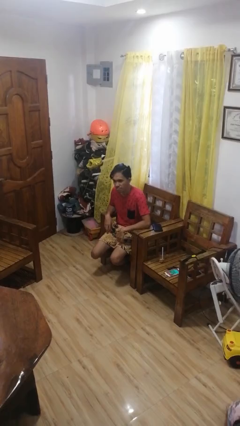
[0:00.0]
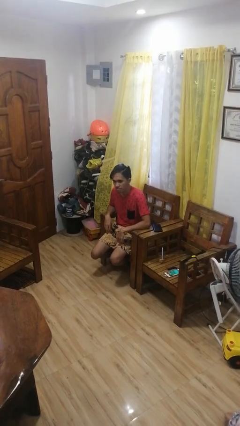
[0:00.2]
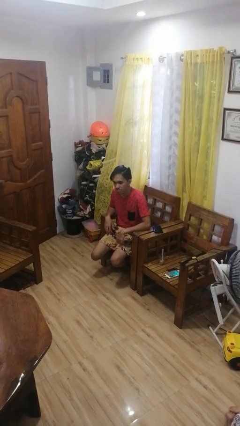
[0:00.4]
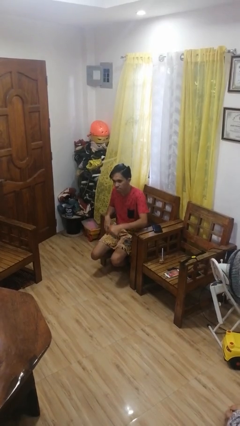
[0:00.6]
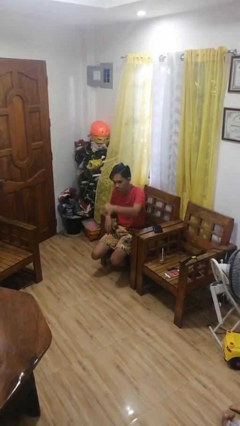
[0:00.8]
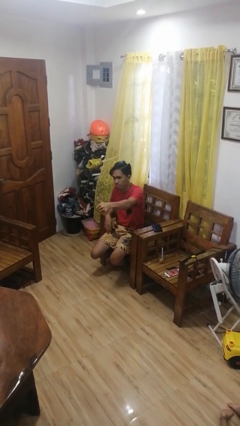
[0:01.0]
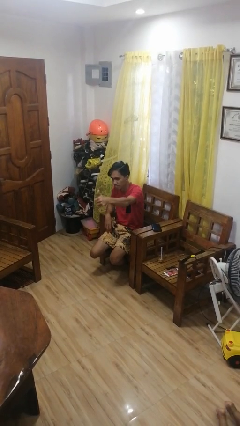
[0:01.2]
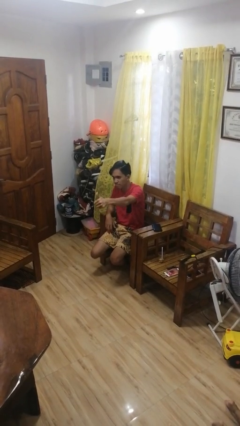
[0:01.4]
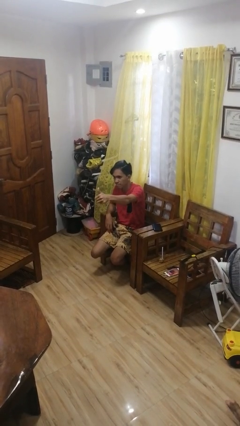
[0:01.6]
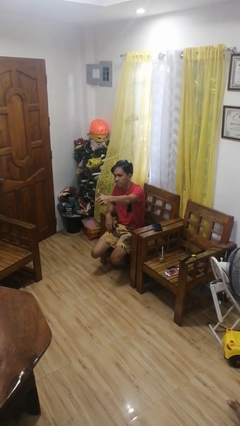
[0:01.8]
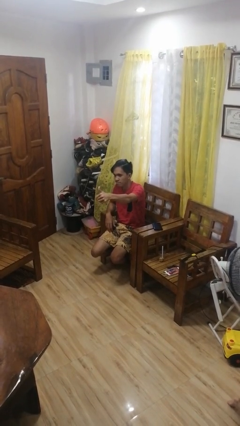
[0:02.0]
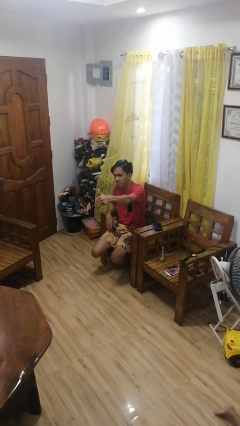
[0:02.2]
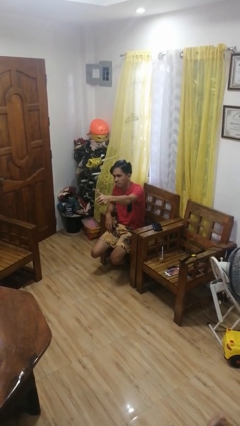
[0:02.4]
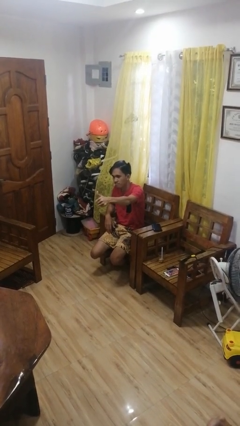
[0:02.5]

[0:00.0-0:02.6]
person gestures thumbs up

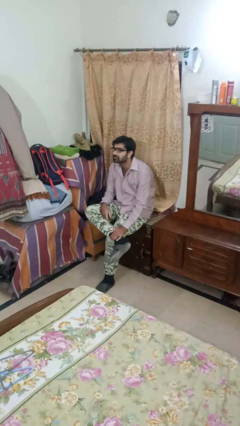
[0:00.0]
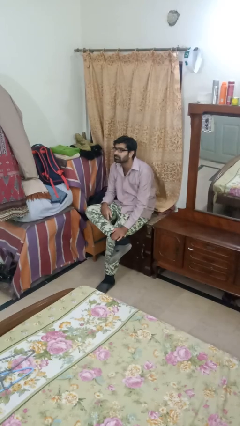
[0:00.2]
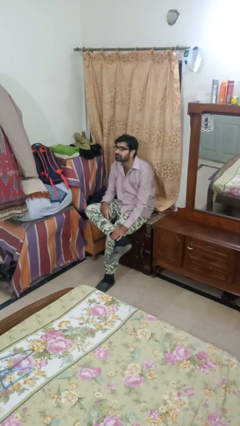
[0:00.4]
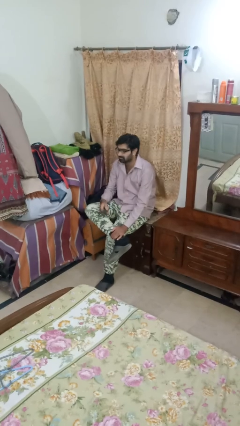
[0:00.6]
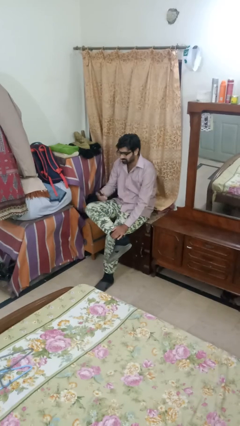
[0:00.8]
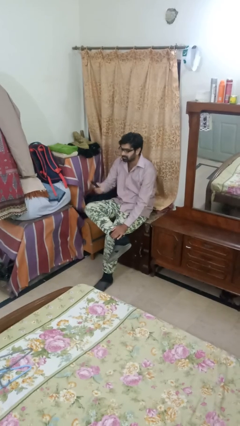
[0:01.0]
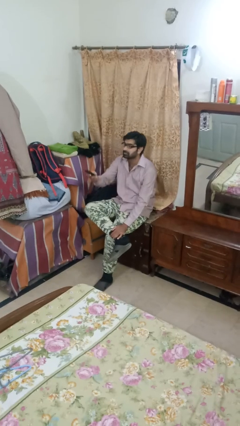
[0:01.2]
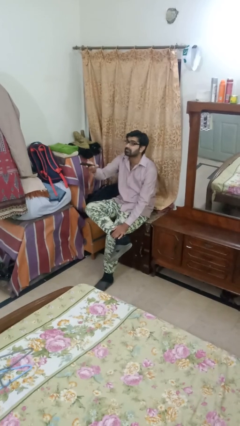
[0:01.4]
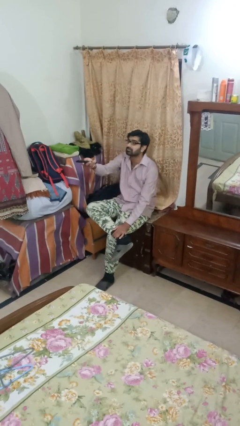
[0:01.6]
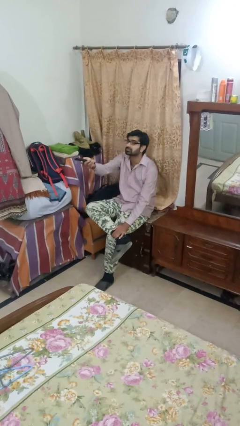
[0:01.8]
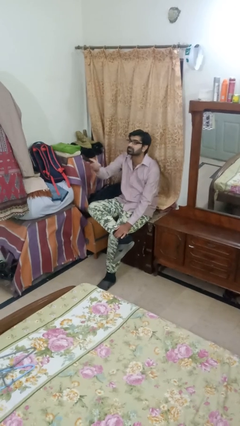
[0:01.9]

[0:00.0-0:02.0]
person uses television remote

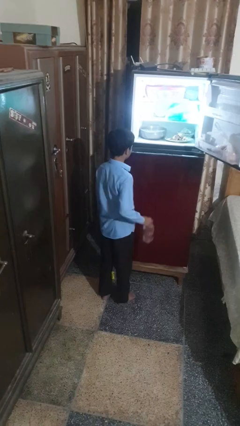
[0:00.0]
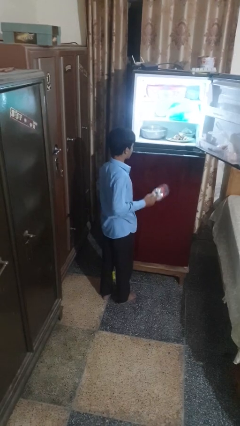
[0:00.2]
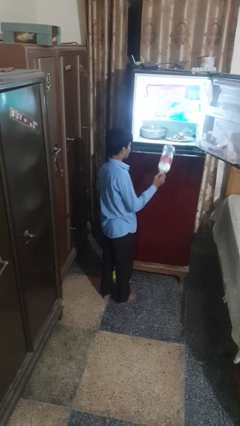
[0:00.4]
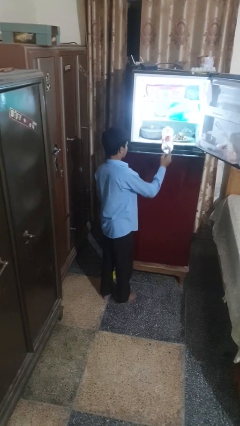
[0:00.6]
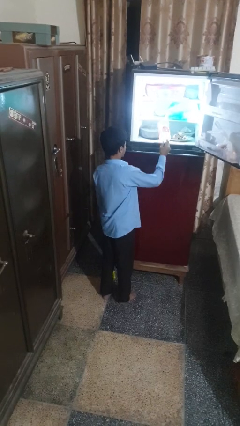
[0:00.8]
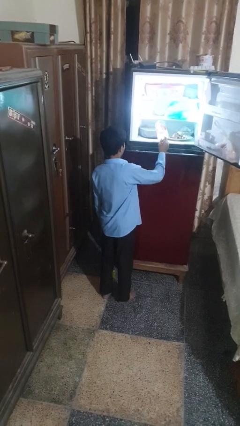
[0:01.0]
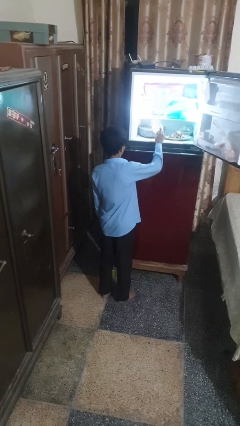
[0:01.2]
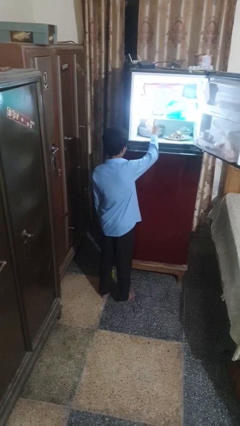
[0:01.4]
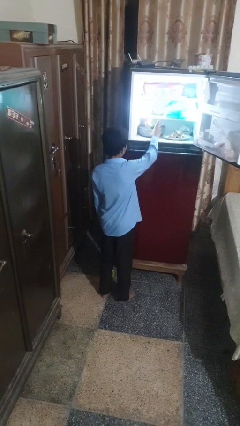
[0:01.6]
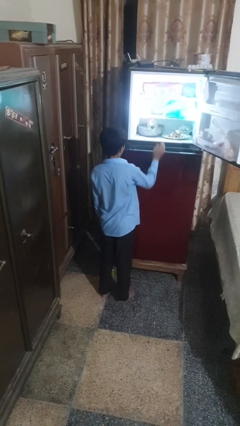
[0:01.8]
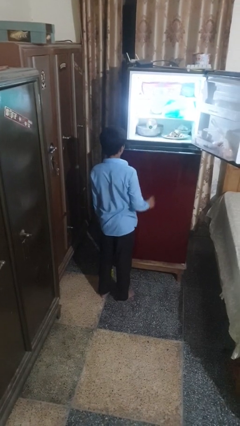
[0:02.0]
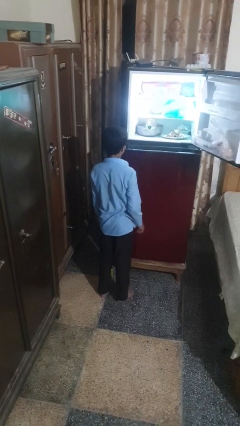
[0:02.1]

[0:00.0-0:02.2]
person puts object into refrigerator

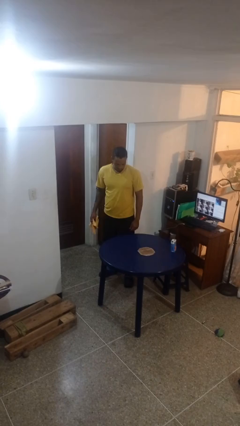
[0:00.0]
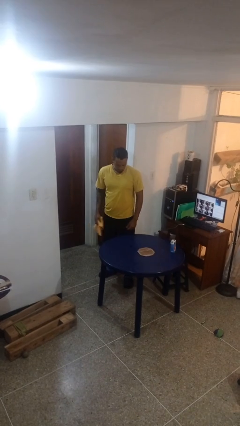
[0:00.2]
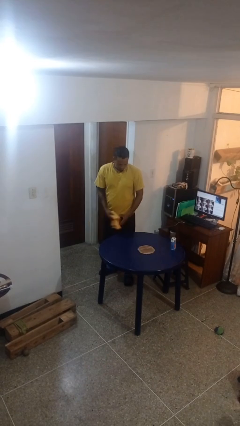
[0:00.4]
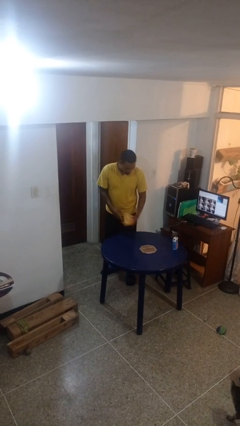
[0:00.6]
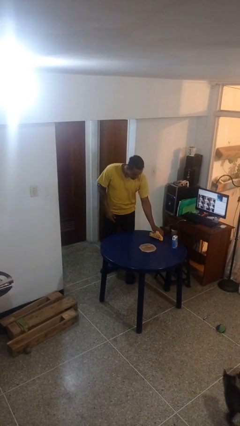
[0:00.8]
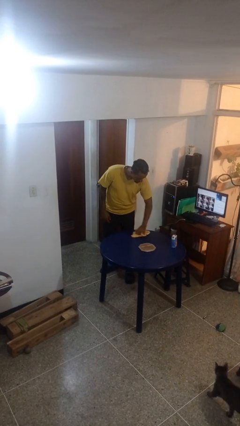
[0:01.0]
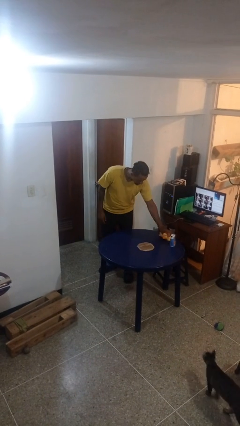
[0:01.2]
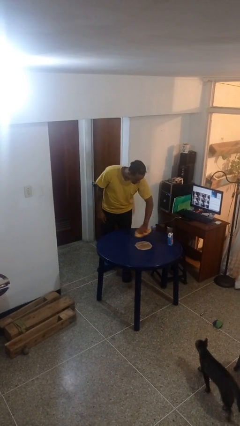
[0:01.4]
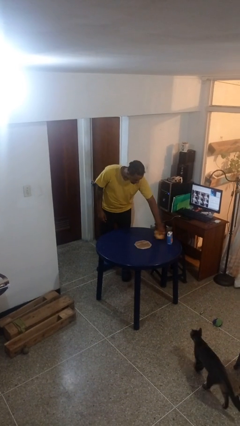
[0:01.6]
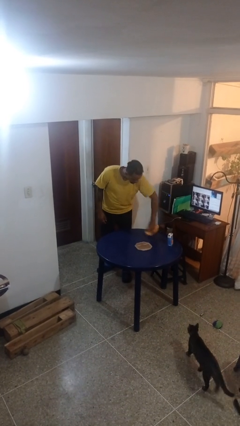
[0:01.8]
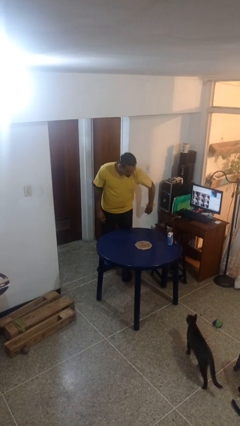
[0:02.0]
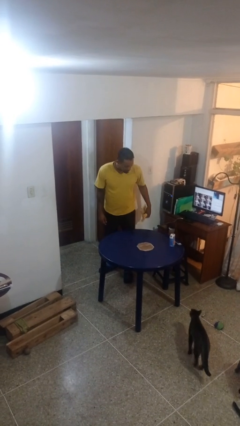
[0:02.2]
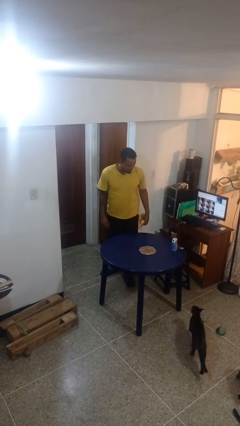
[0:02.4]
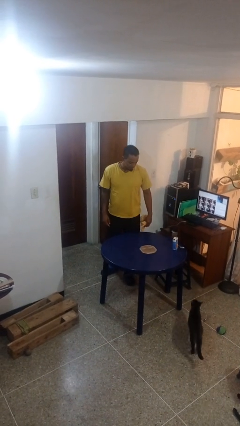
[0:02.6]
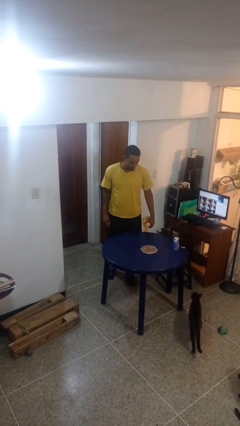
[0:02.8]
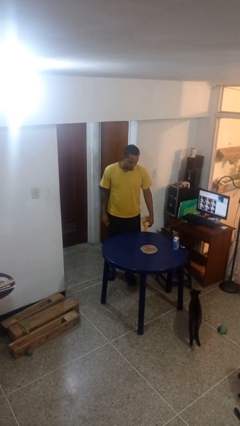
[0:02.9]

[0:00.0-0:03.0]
person cleans table with rag

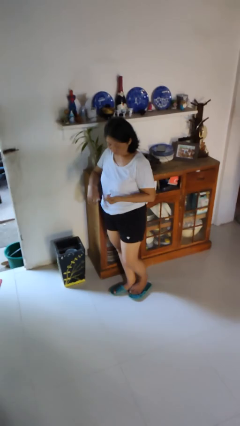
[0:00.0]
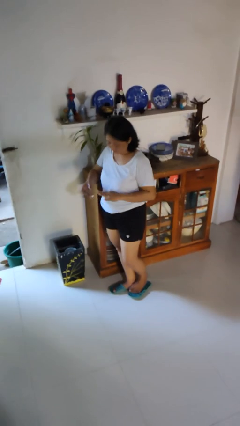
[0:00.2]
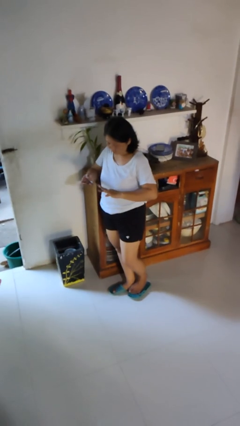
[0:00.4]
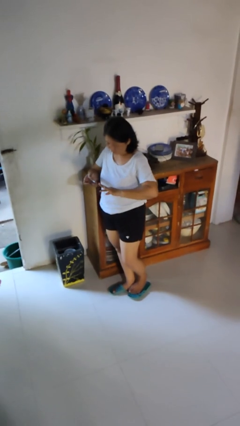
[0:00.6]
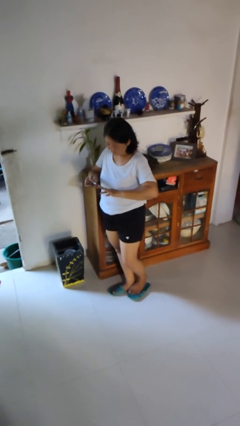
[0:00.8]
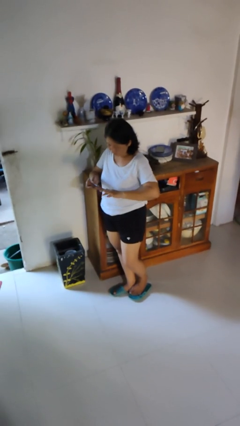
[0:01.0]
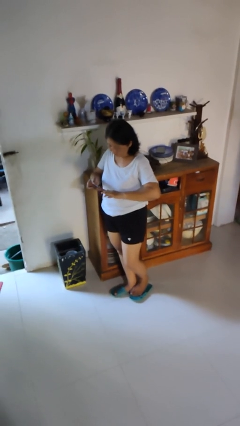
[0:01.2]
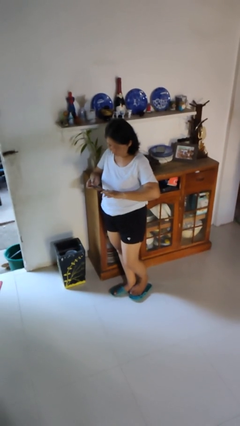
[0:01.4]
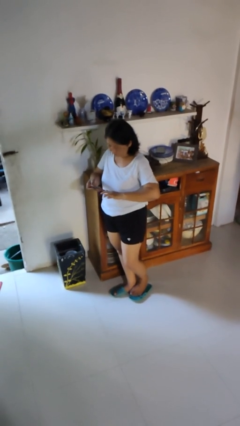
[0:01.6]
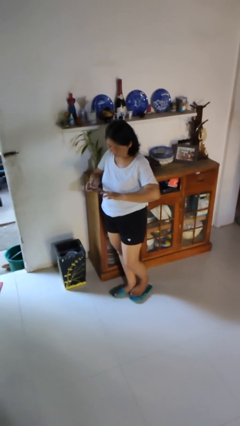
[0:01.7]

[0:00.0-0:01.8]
person clips fingernails

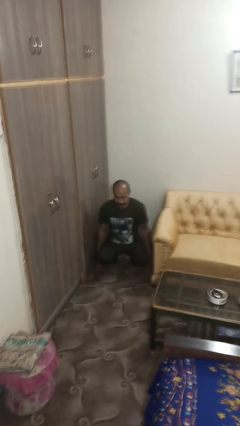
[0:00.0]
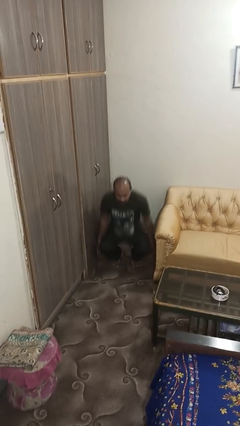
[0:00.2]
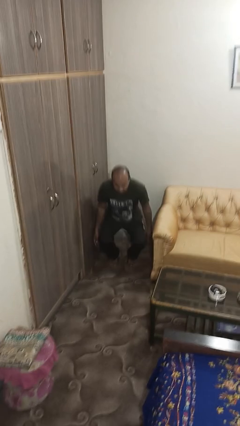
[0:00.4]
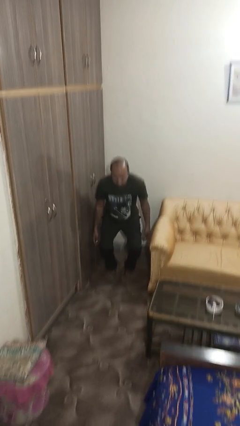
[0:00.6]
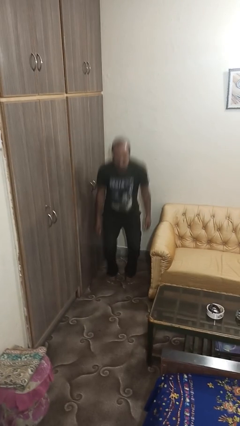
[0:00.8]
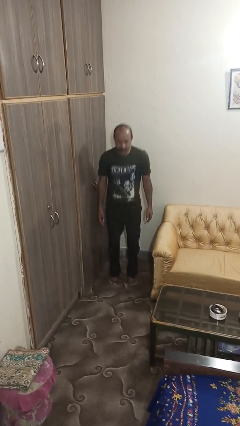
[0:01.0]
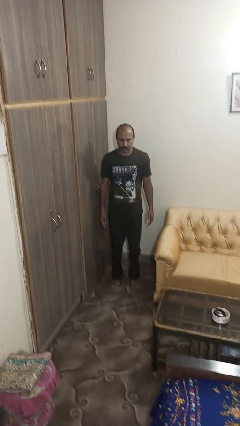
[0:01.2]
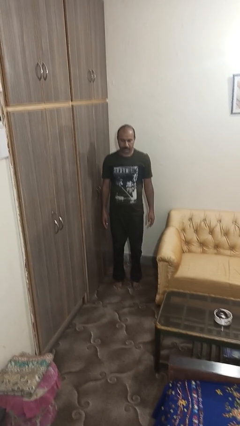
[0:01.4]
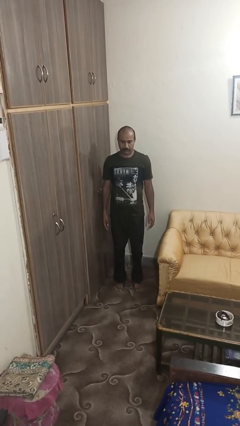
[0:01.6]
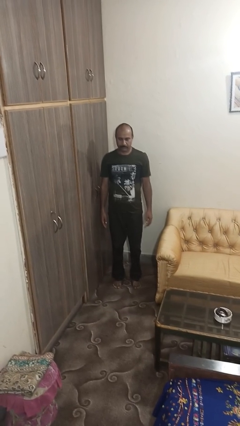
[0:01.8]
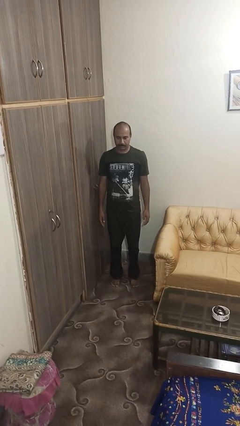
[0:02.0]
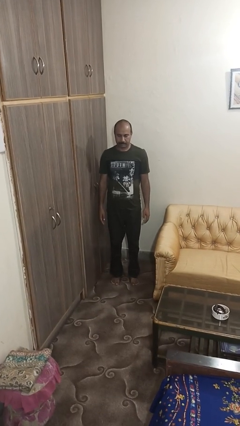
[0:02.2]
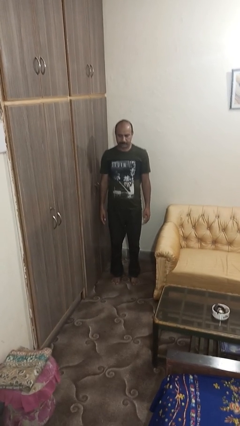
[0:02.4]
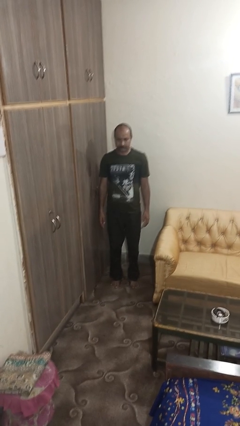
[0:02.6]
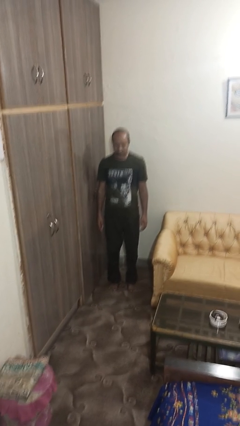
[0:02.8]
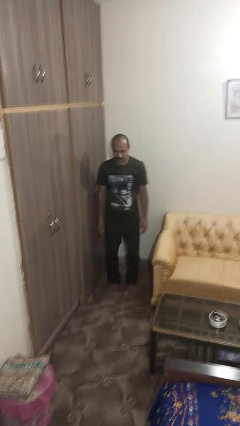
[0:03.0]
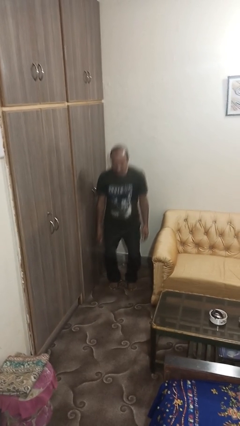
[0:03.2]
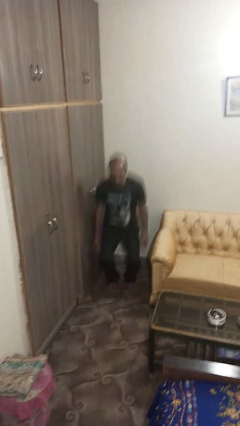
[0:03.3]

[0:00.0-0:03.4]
person stands up

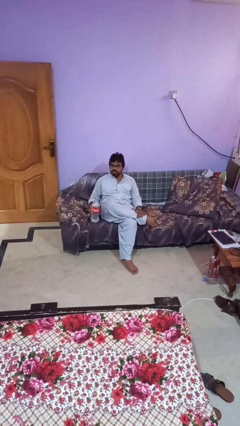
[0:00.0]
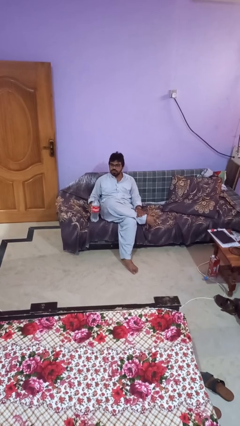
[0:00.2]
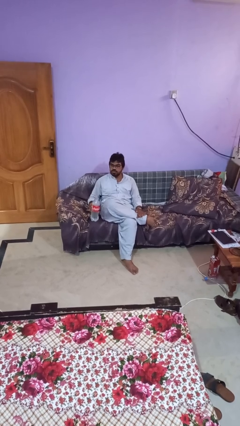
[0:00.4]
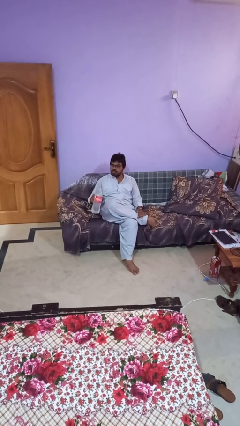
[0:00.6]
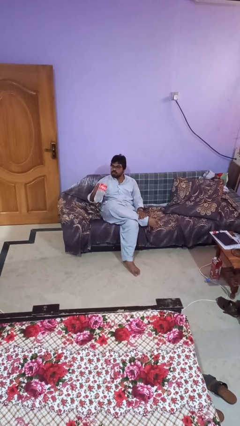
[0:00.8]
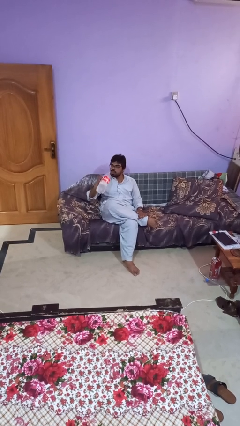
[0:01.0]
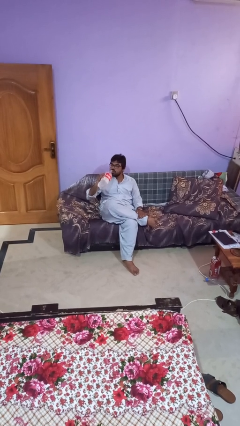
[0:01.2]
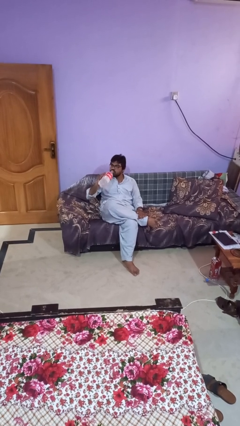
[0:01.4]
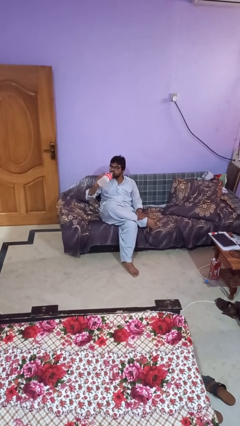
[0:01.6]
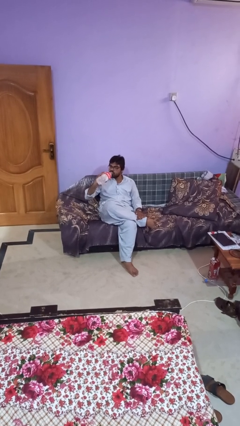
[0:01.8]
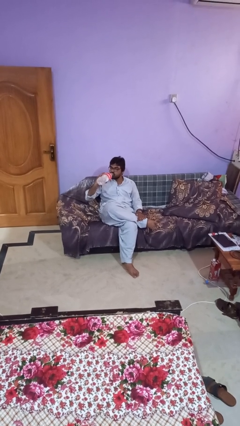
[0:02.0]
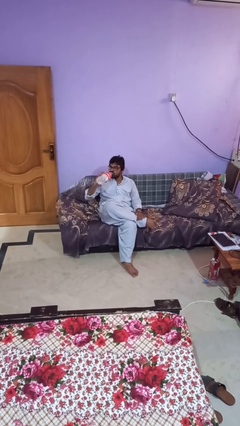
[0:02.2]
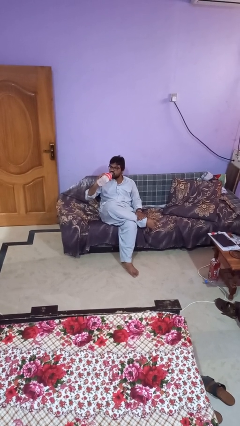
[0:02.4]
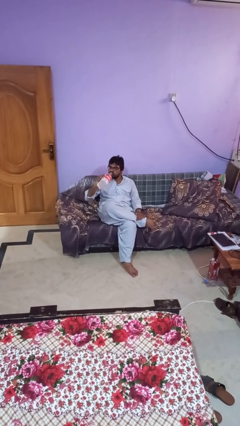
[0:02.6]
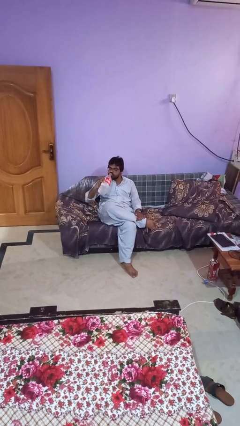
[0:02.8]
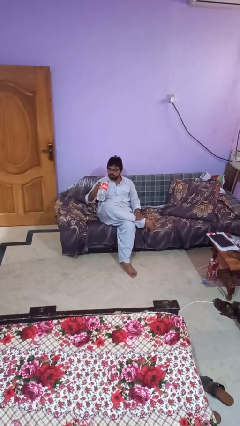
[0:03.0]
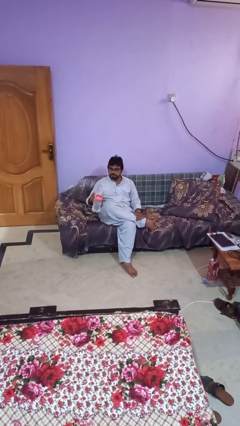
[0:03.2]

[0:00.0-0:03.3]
person drinks from bottle
